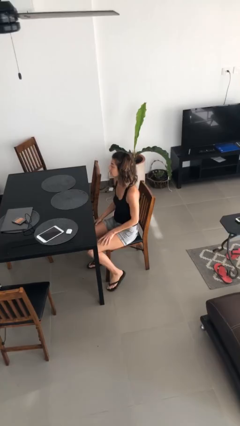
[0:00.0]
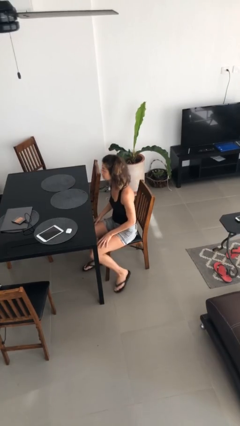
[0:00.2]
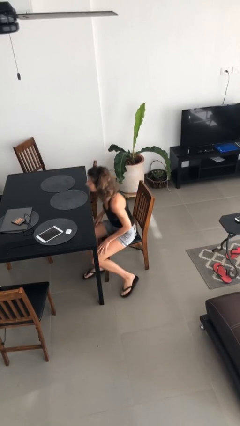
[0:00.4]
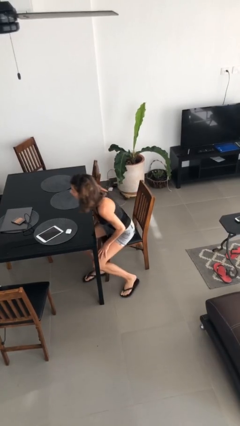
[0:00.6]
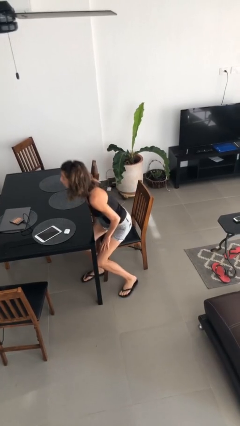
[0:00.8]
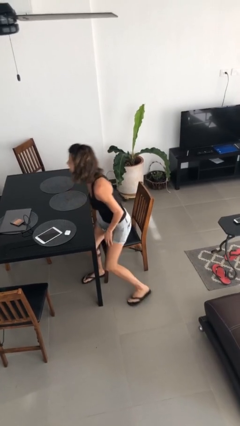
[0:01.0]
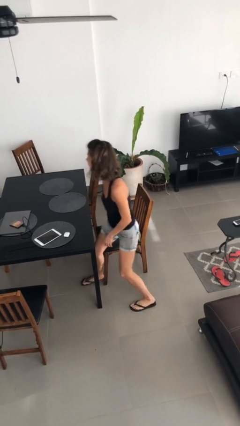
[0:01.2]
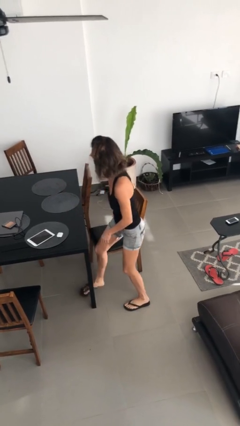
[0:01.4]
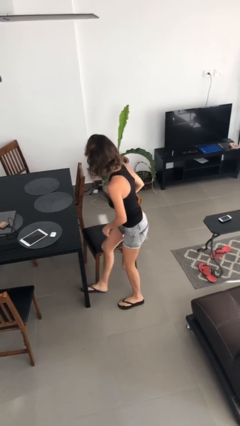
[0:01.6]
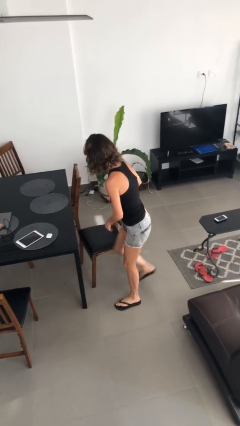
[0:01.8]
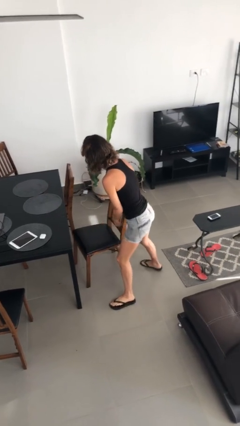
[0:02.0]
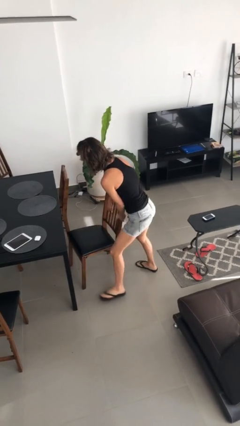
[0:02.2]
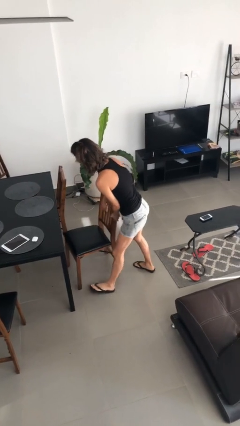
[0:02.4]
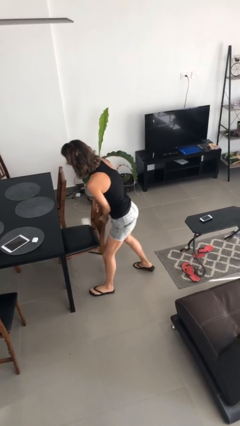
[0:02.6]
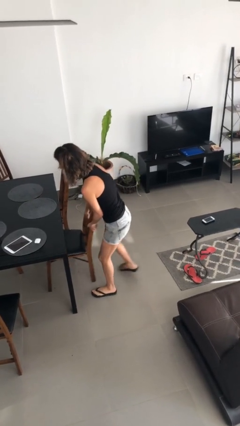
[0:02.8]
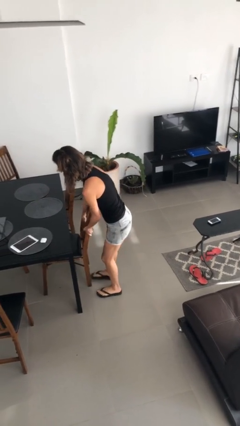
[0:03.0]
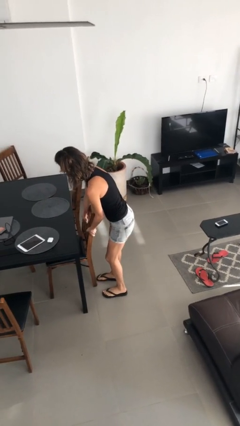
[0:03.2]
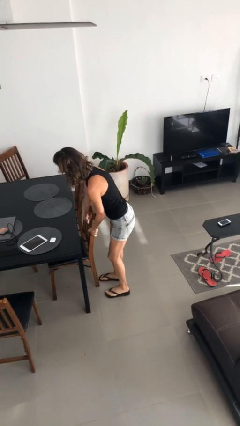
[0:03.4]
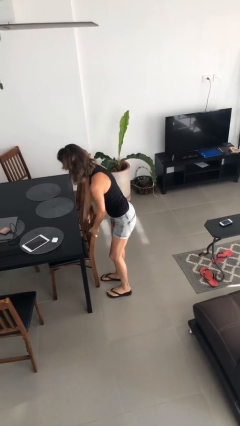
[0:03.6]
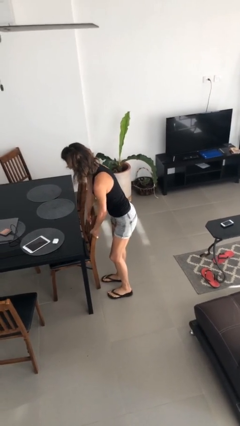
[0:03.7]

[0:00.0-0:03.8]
person stands up

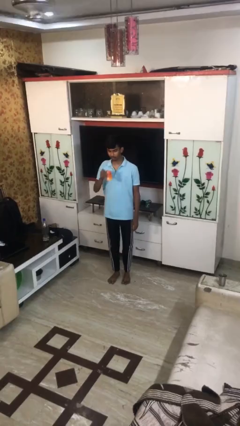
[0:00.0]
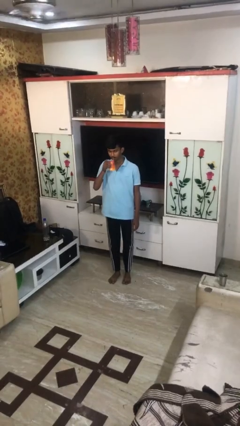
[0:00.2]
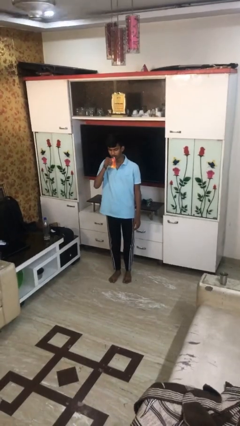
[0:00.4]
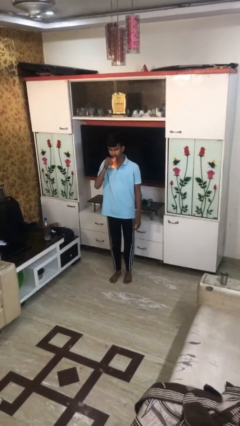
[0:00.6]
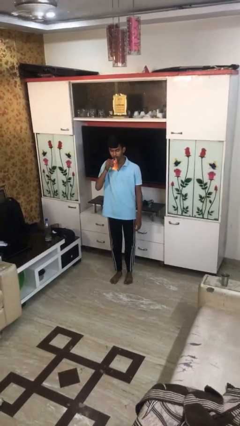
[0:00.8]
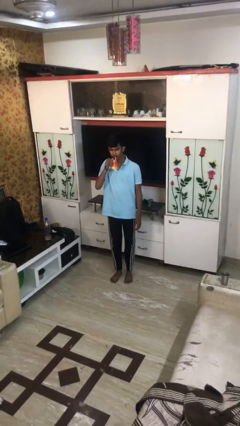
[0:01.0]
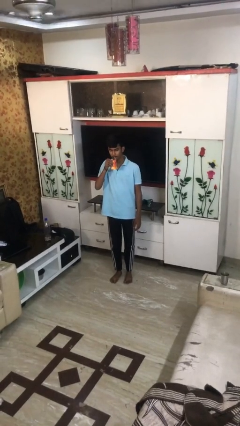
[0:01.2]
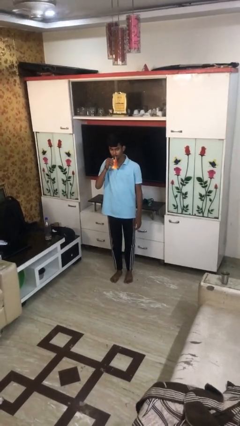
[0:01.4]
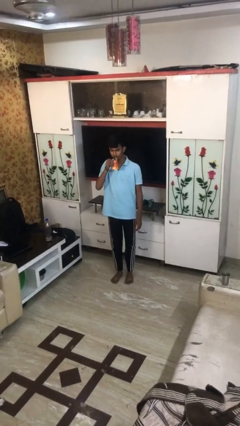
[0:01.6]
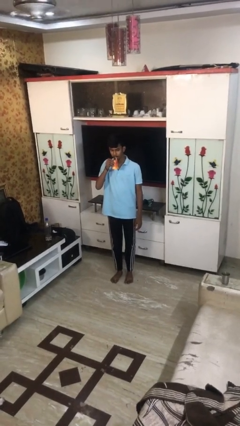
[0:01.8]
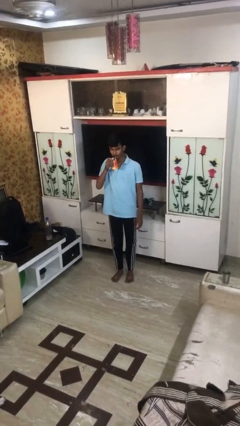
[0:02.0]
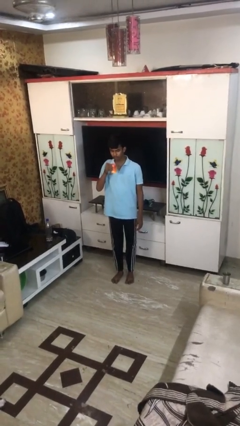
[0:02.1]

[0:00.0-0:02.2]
person drinks from straw

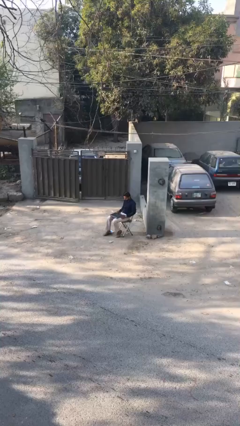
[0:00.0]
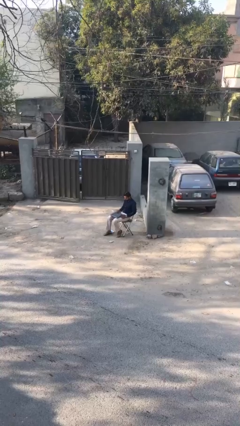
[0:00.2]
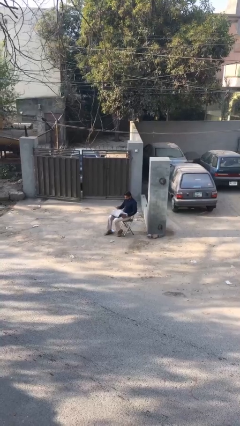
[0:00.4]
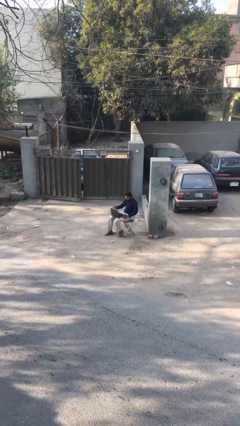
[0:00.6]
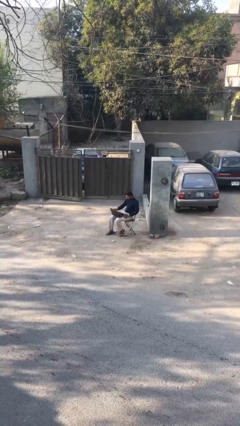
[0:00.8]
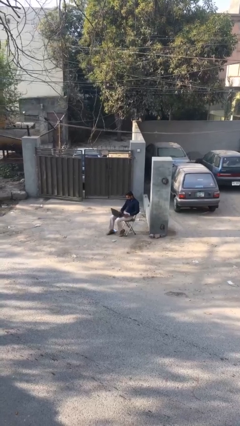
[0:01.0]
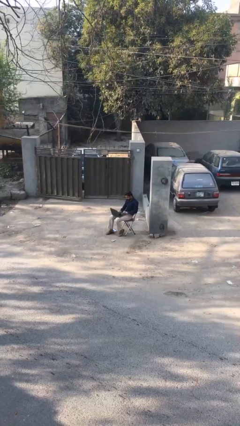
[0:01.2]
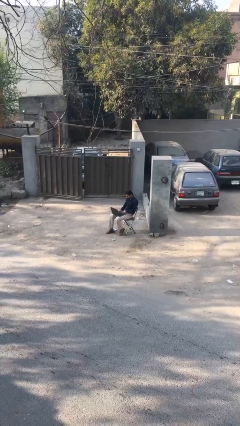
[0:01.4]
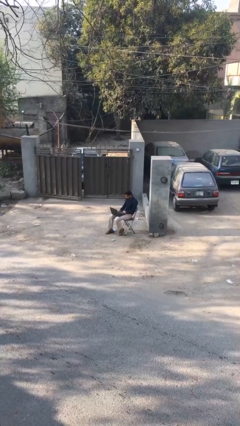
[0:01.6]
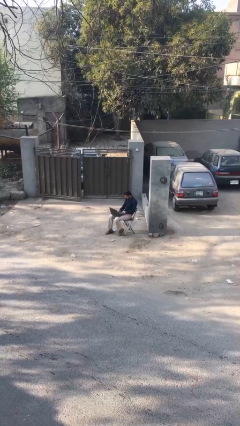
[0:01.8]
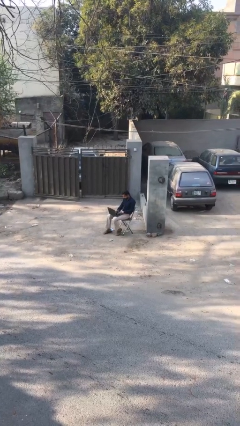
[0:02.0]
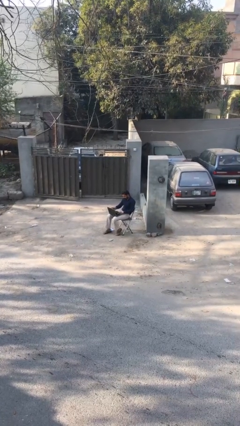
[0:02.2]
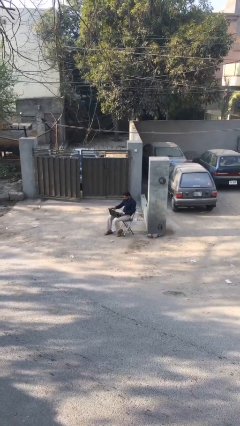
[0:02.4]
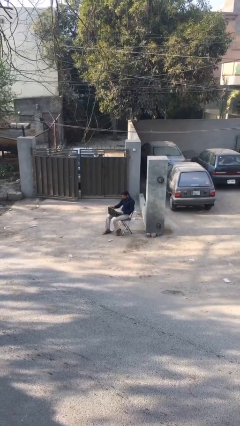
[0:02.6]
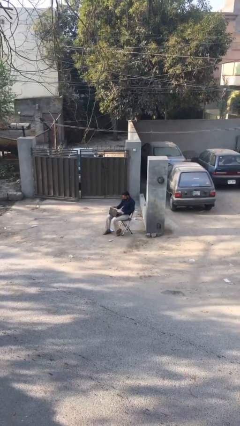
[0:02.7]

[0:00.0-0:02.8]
person interacts with laptop

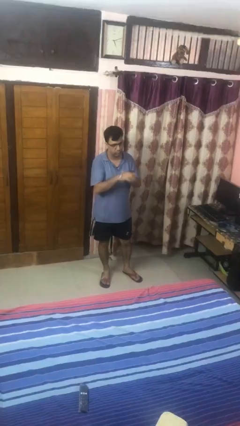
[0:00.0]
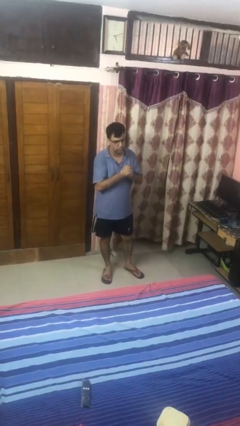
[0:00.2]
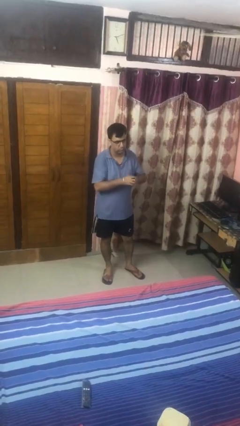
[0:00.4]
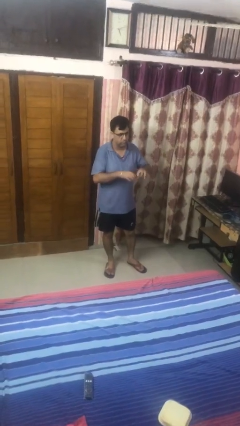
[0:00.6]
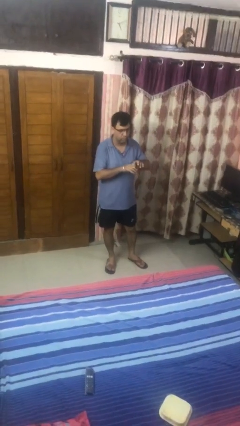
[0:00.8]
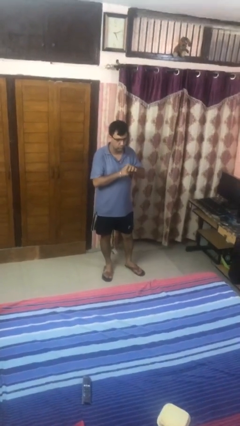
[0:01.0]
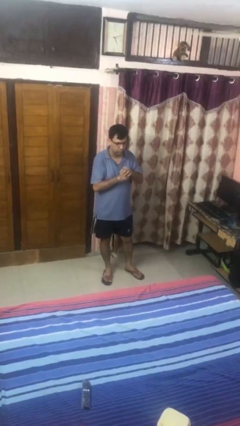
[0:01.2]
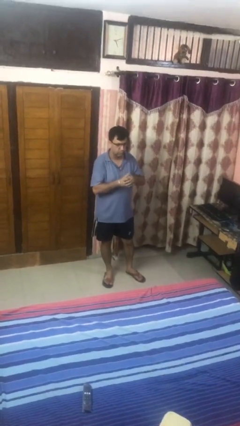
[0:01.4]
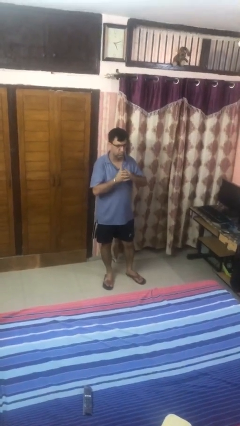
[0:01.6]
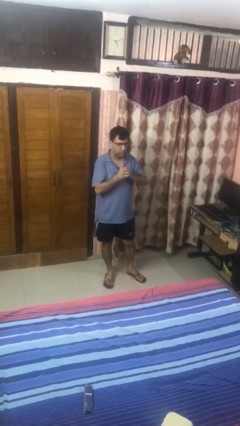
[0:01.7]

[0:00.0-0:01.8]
person cracks knuckles

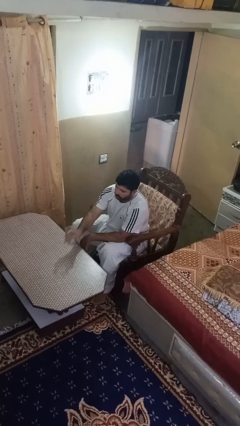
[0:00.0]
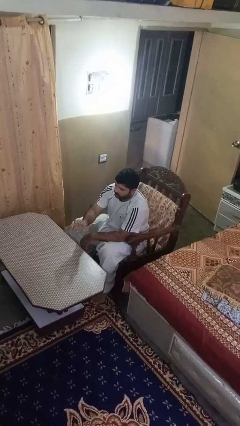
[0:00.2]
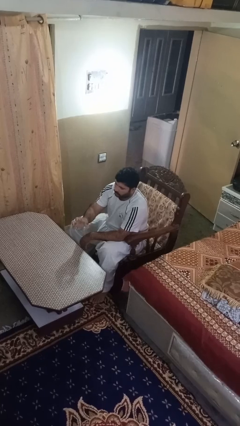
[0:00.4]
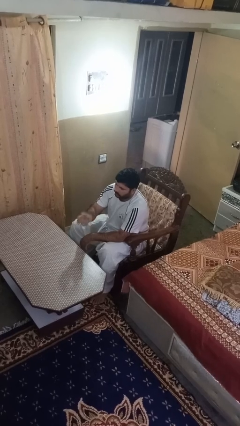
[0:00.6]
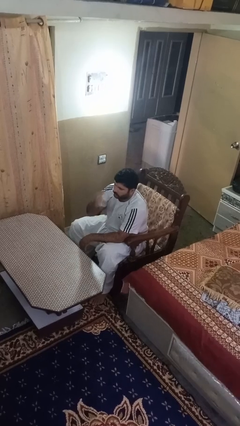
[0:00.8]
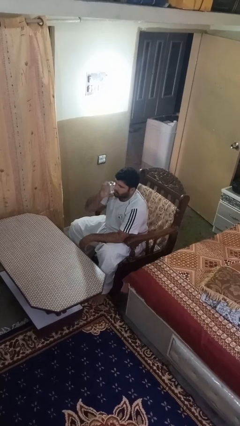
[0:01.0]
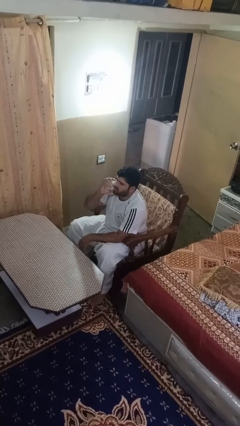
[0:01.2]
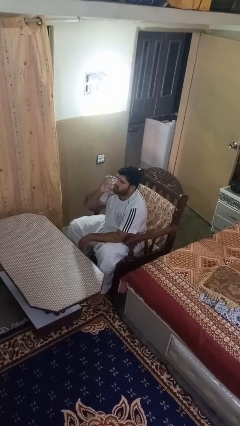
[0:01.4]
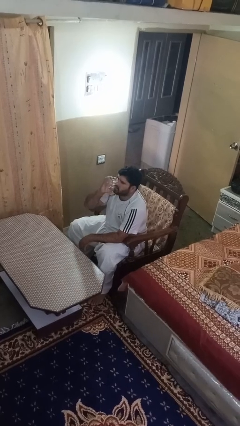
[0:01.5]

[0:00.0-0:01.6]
person drinks from shotglass

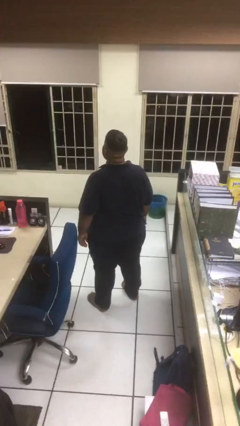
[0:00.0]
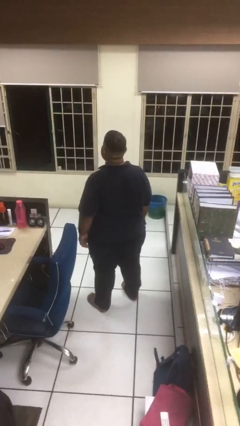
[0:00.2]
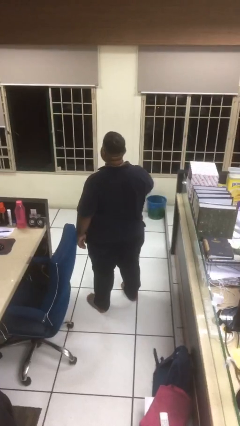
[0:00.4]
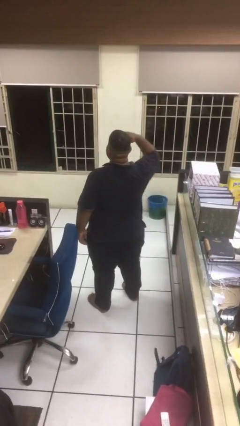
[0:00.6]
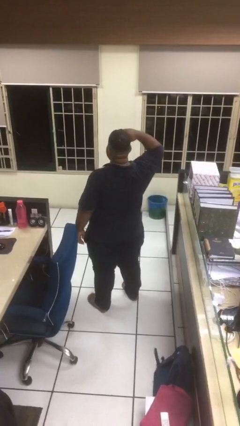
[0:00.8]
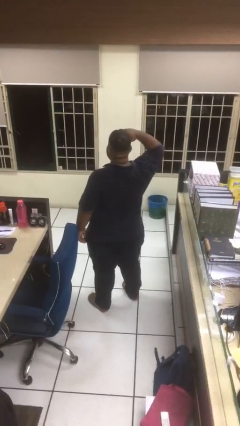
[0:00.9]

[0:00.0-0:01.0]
person salutes

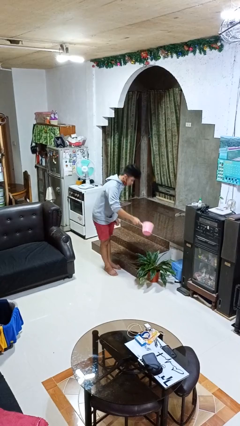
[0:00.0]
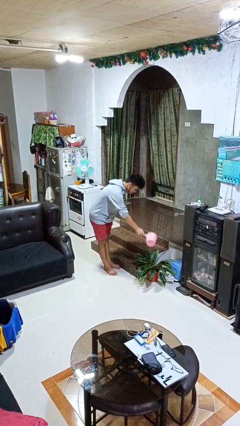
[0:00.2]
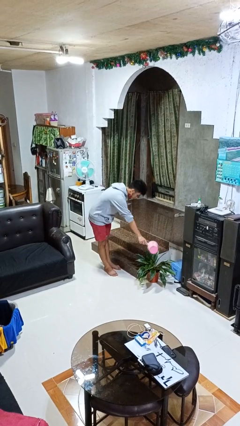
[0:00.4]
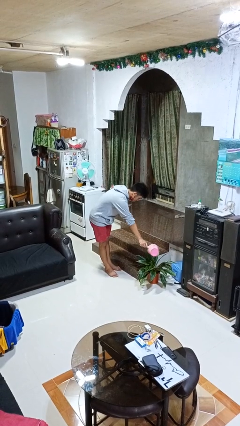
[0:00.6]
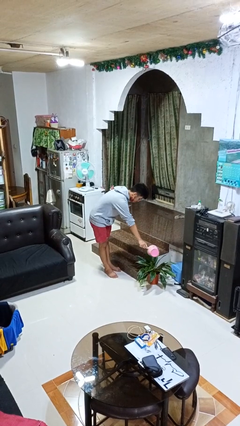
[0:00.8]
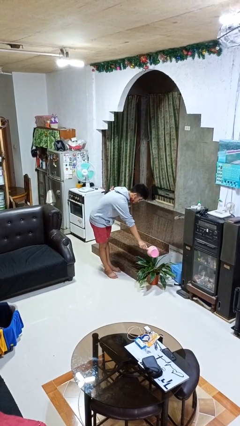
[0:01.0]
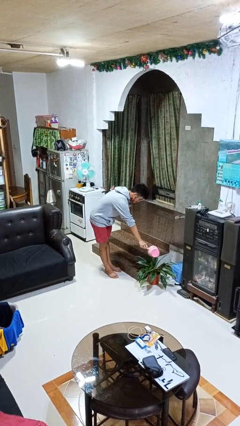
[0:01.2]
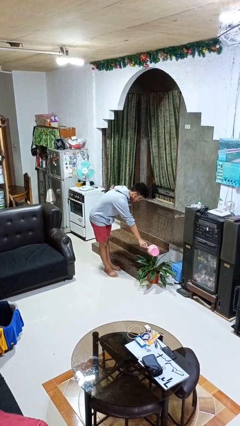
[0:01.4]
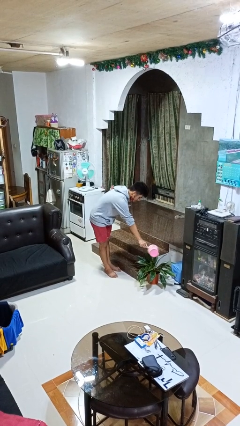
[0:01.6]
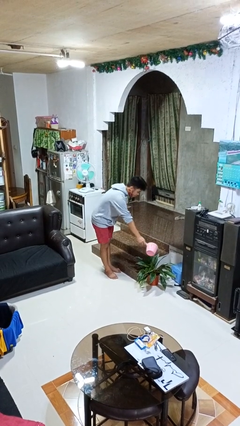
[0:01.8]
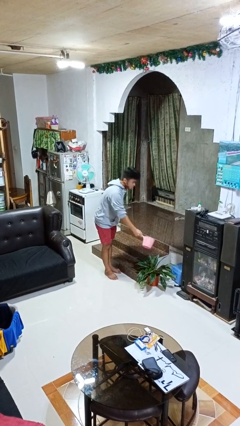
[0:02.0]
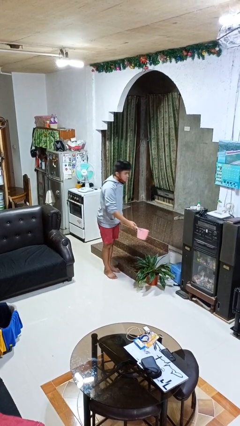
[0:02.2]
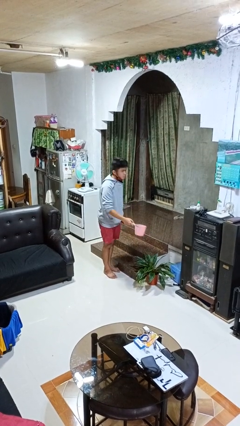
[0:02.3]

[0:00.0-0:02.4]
person waters houseplant

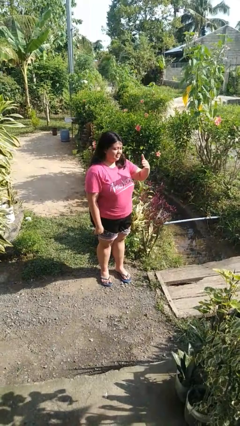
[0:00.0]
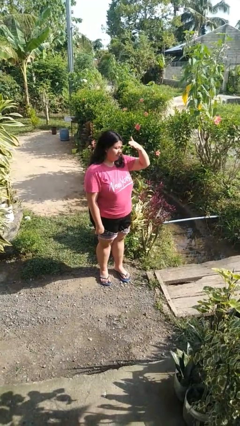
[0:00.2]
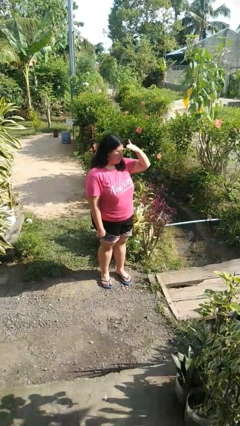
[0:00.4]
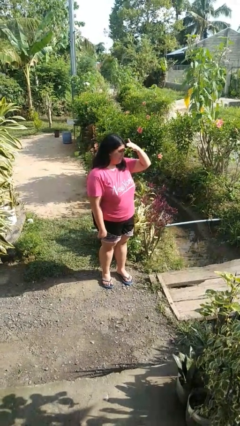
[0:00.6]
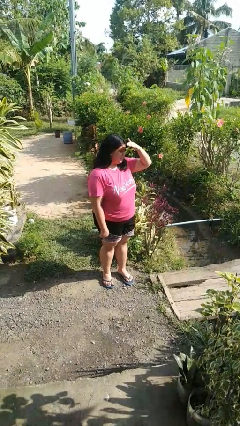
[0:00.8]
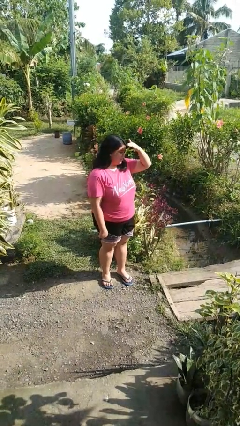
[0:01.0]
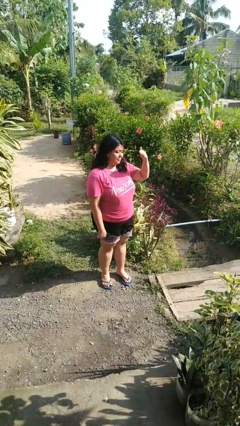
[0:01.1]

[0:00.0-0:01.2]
person shades eyes
